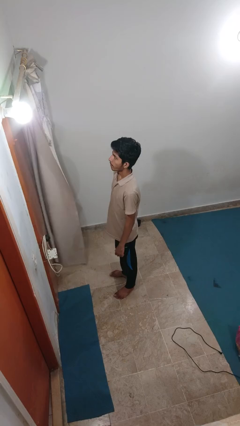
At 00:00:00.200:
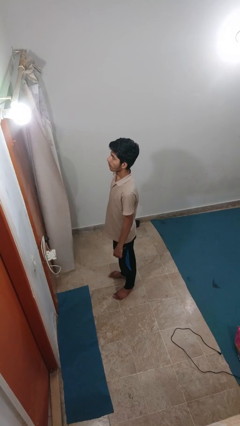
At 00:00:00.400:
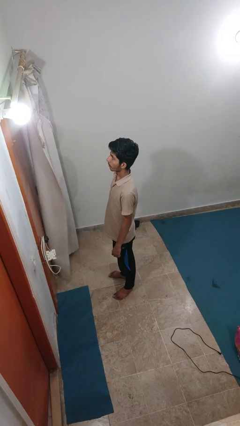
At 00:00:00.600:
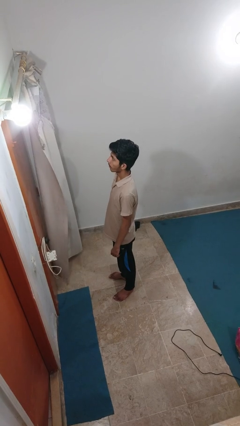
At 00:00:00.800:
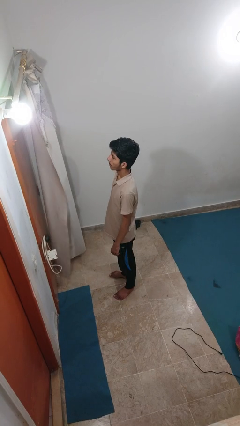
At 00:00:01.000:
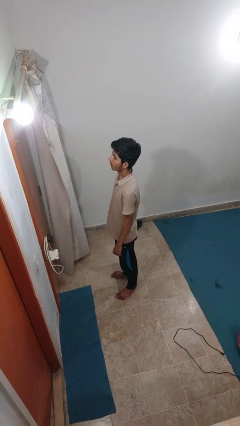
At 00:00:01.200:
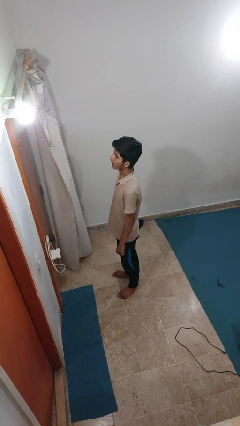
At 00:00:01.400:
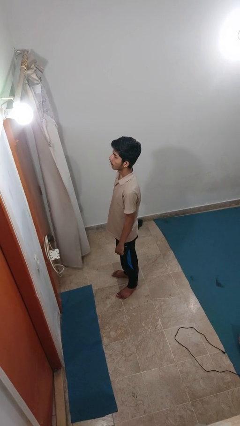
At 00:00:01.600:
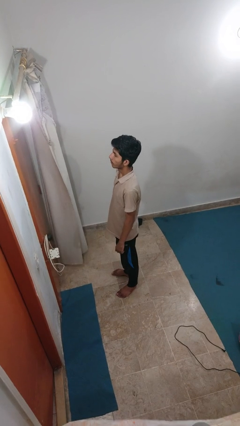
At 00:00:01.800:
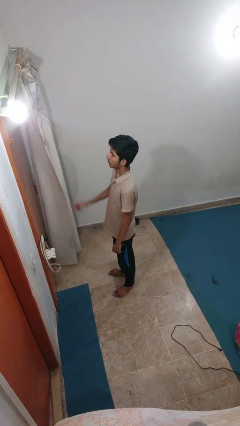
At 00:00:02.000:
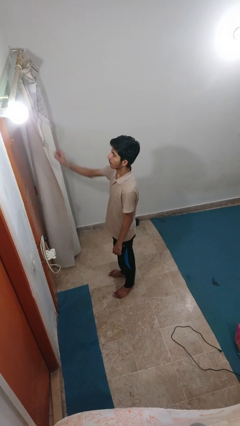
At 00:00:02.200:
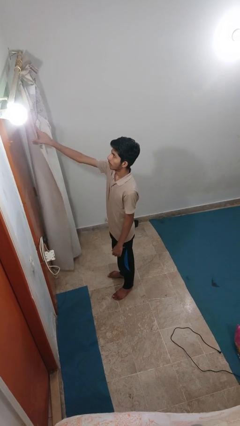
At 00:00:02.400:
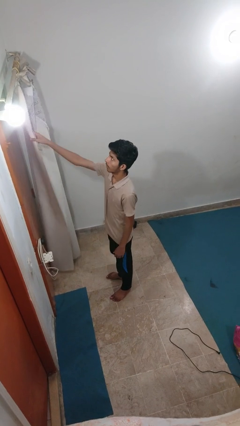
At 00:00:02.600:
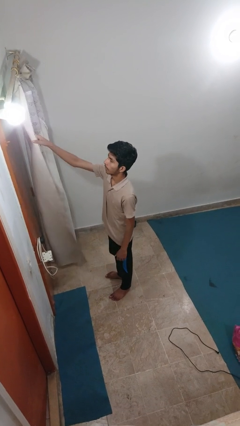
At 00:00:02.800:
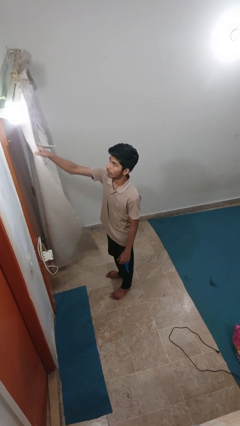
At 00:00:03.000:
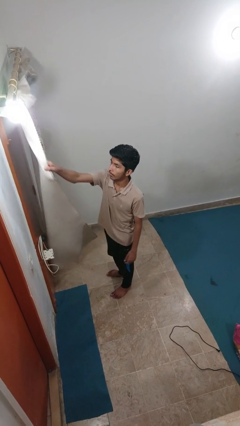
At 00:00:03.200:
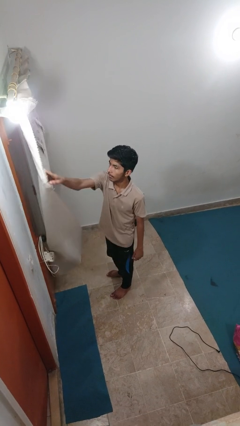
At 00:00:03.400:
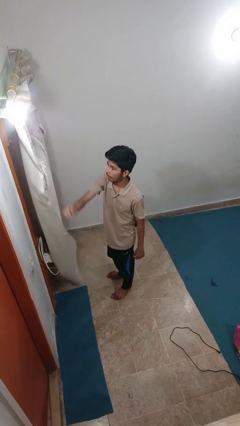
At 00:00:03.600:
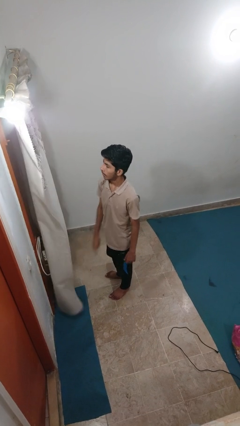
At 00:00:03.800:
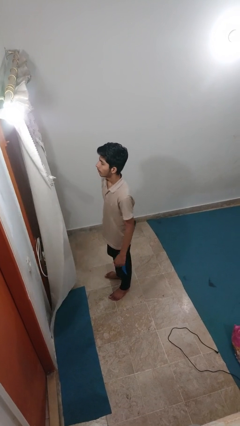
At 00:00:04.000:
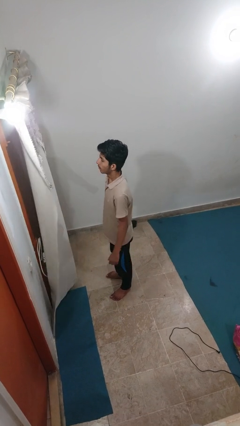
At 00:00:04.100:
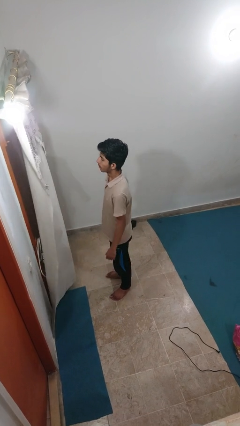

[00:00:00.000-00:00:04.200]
person closes curtains

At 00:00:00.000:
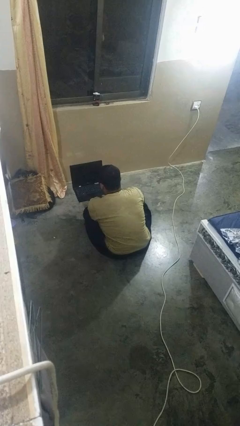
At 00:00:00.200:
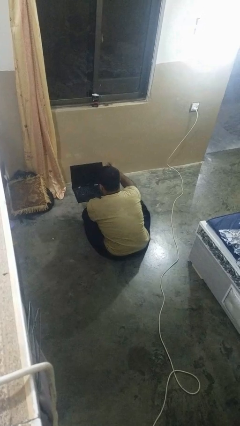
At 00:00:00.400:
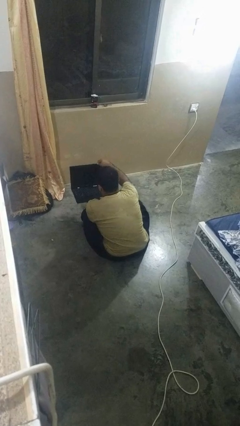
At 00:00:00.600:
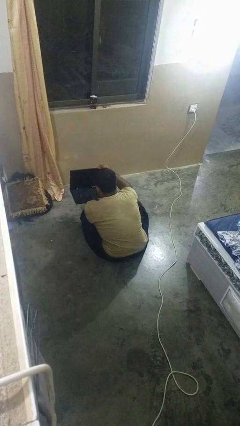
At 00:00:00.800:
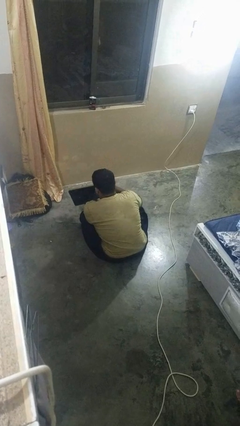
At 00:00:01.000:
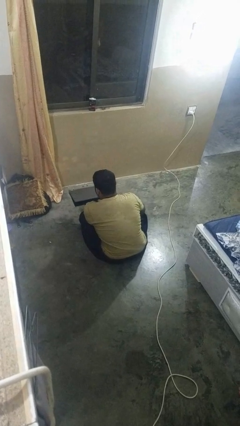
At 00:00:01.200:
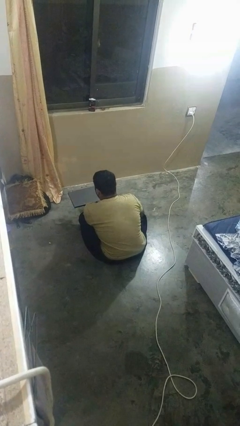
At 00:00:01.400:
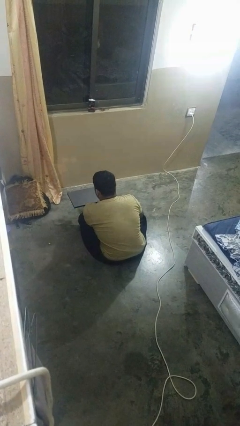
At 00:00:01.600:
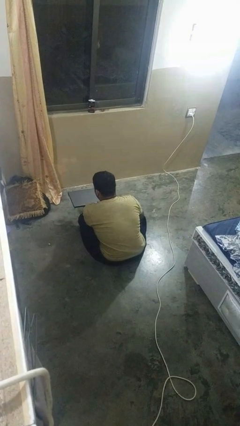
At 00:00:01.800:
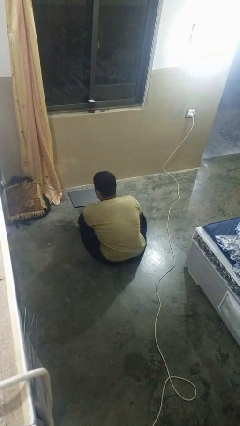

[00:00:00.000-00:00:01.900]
person closes laptop

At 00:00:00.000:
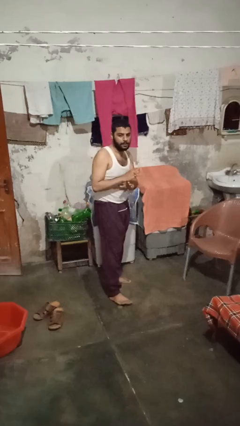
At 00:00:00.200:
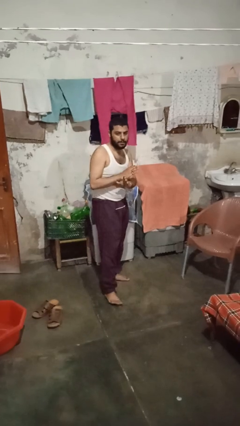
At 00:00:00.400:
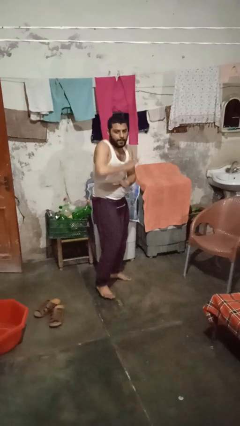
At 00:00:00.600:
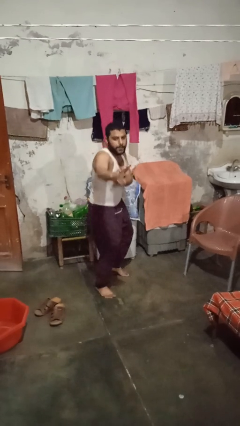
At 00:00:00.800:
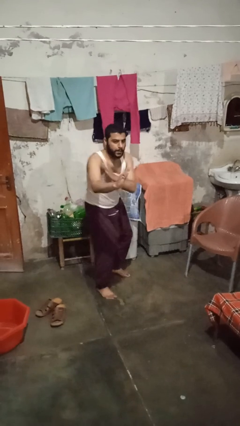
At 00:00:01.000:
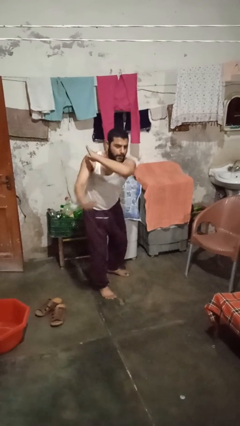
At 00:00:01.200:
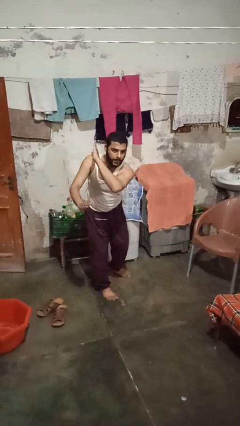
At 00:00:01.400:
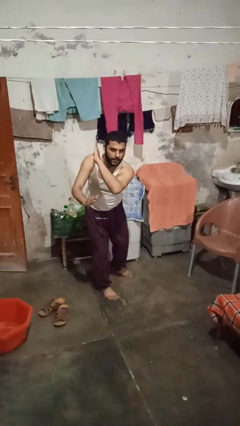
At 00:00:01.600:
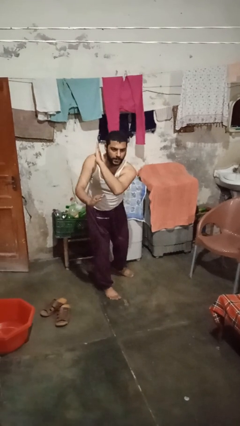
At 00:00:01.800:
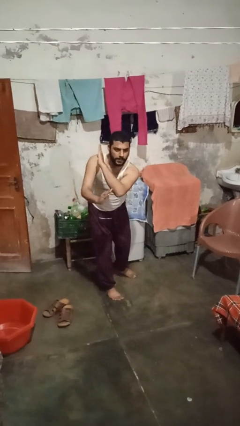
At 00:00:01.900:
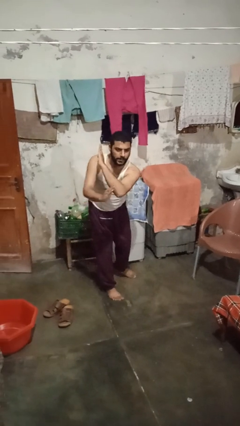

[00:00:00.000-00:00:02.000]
person karate chop

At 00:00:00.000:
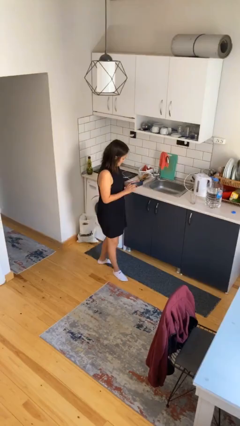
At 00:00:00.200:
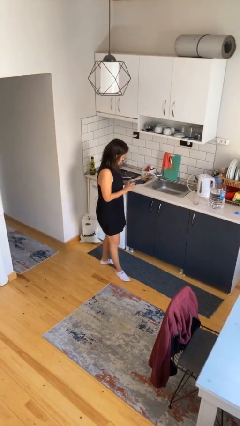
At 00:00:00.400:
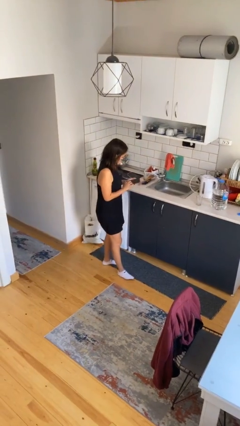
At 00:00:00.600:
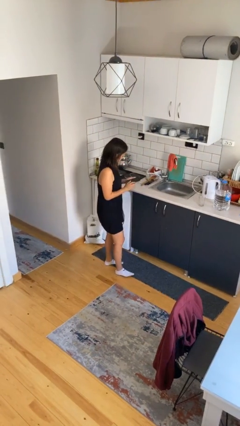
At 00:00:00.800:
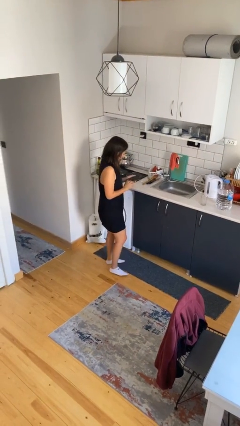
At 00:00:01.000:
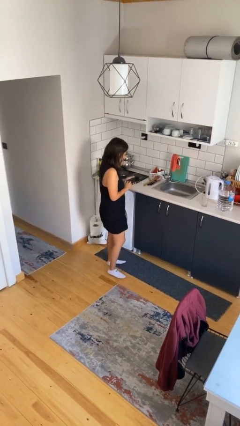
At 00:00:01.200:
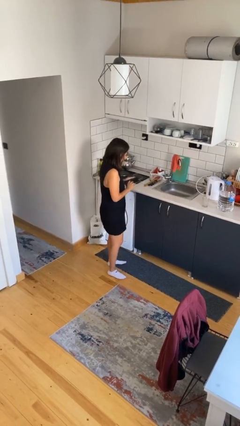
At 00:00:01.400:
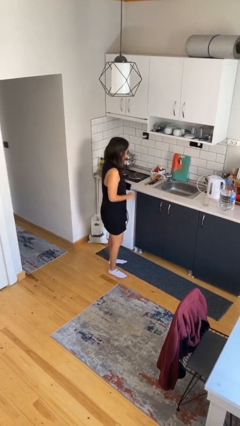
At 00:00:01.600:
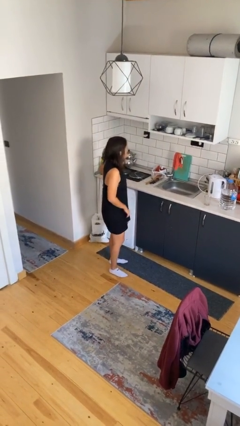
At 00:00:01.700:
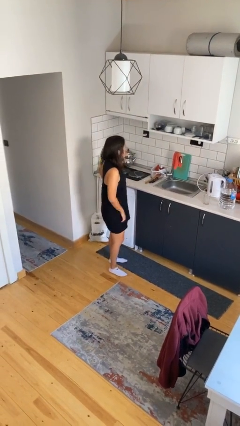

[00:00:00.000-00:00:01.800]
person puts phone into pocket

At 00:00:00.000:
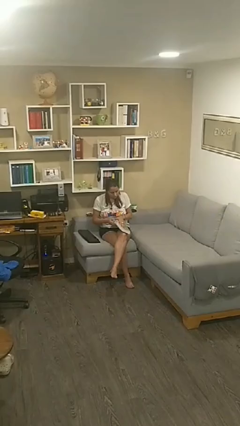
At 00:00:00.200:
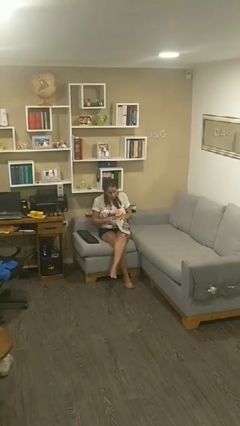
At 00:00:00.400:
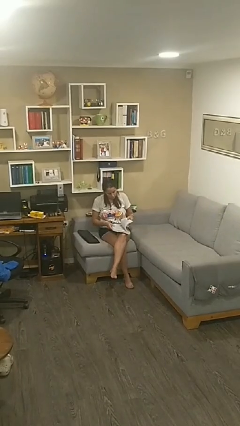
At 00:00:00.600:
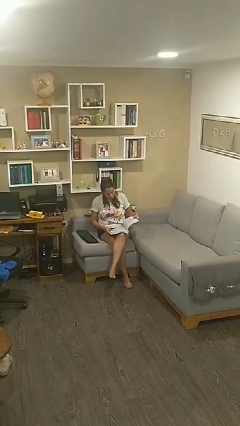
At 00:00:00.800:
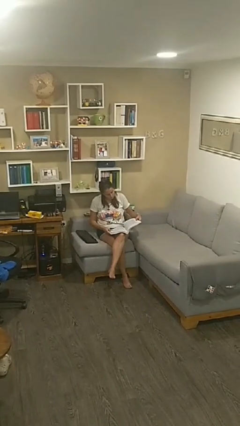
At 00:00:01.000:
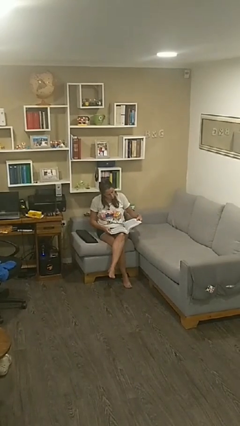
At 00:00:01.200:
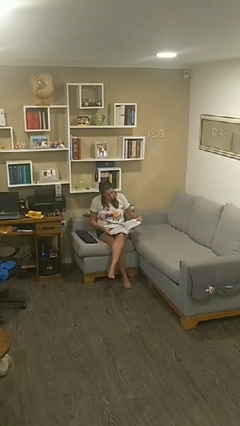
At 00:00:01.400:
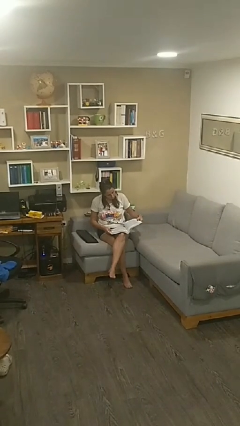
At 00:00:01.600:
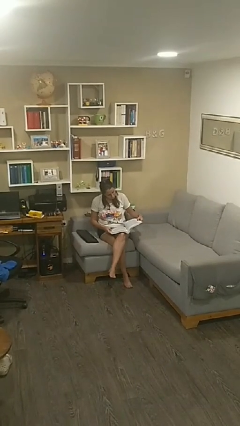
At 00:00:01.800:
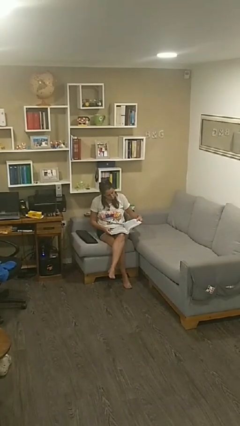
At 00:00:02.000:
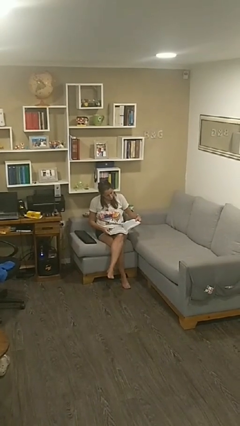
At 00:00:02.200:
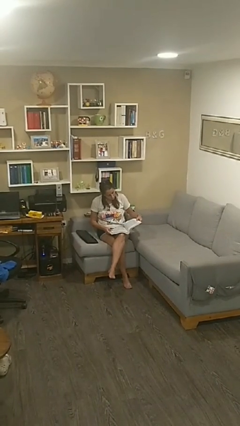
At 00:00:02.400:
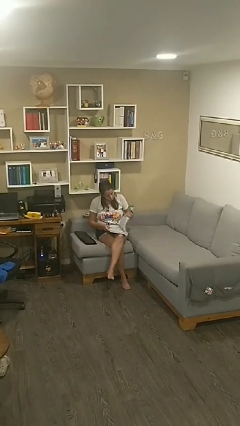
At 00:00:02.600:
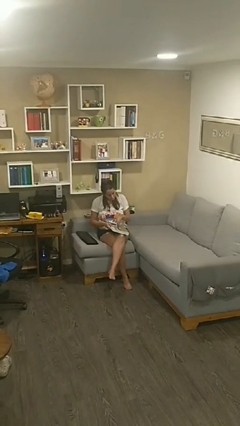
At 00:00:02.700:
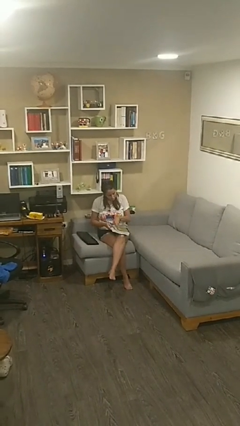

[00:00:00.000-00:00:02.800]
person reads document

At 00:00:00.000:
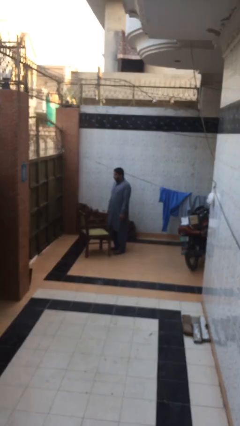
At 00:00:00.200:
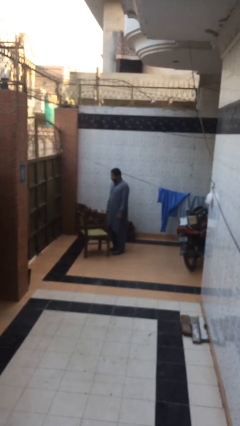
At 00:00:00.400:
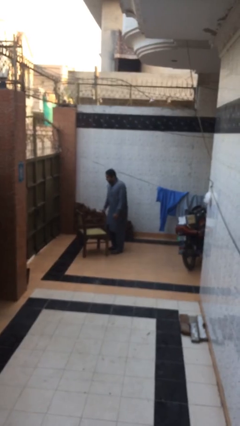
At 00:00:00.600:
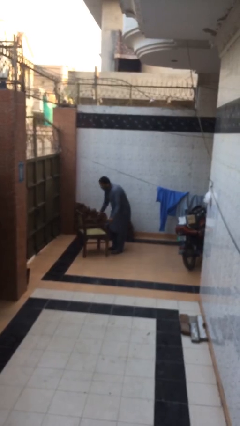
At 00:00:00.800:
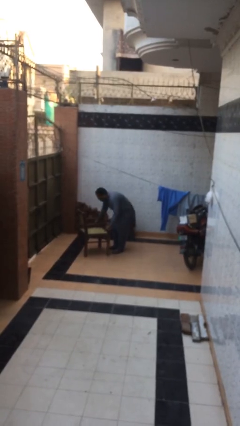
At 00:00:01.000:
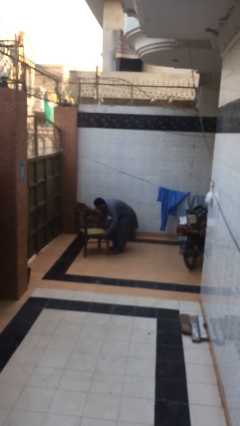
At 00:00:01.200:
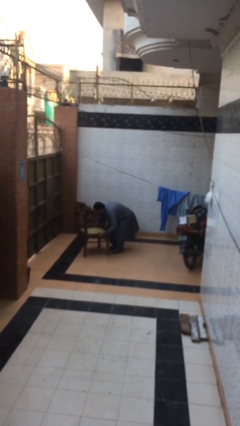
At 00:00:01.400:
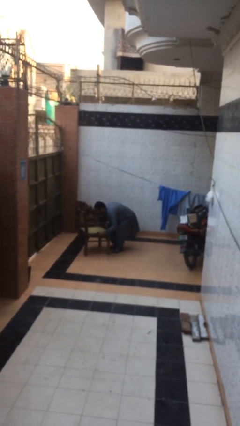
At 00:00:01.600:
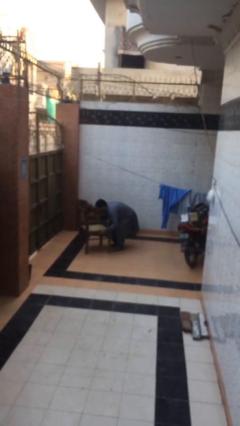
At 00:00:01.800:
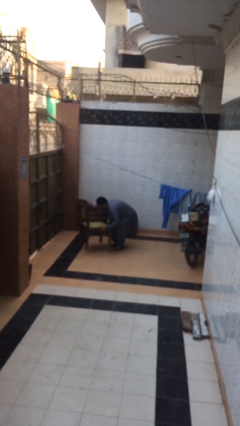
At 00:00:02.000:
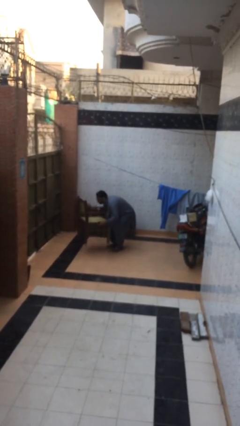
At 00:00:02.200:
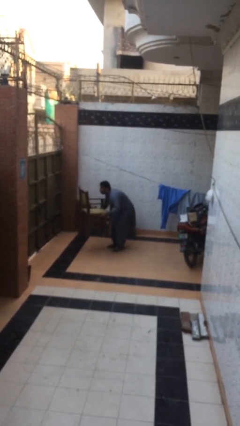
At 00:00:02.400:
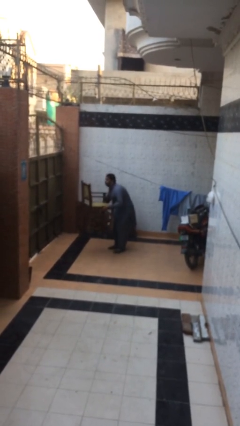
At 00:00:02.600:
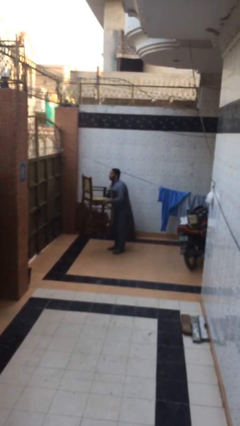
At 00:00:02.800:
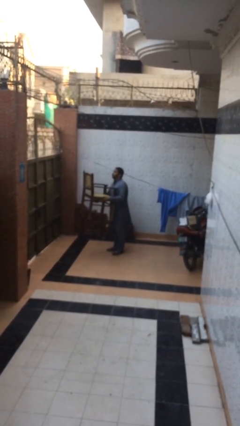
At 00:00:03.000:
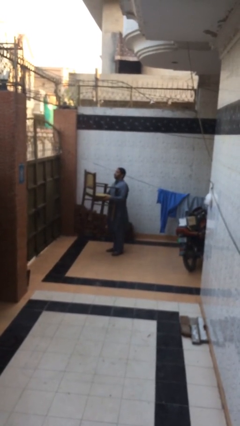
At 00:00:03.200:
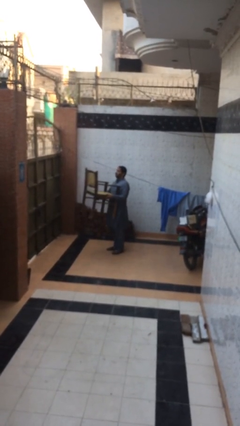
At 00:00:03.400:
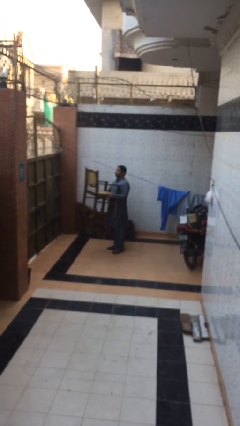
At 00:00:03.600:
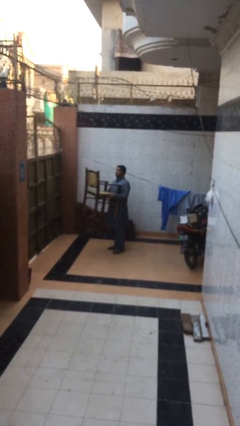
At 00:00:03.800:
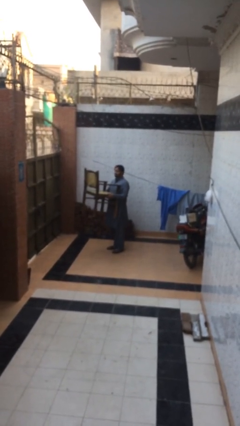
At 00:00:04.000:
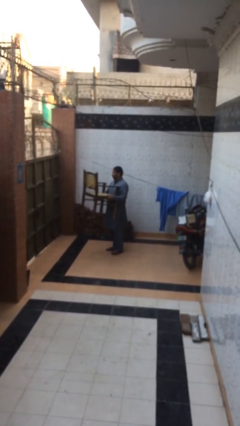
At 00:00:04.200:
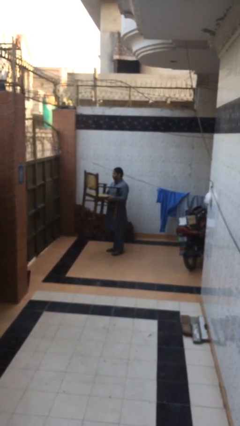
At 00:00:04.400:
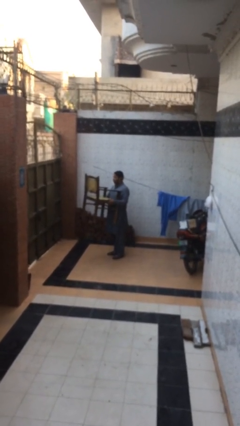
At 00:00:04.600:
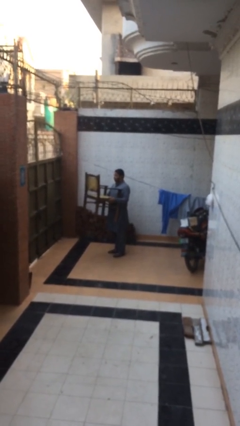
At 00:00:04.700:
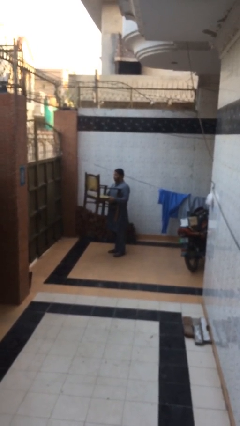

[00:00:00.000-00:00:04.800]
person picks up object from floor
